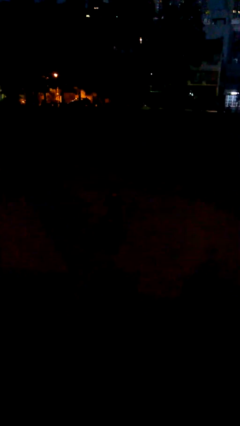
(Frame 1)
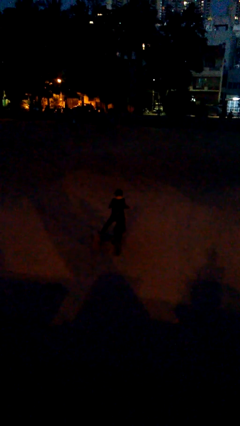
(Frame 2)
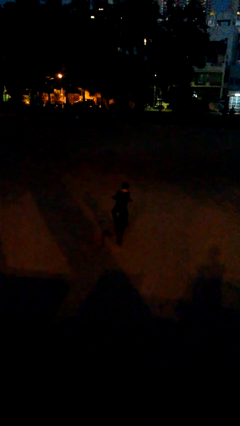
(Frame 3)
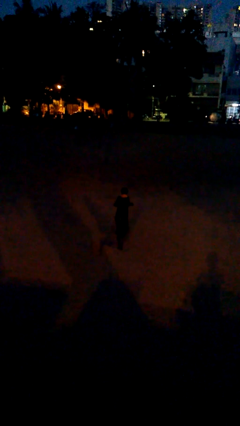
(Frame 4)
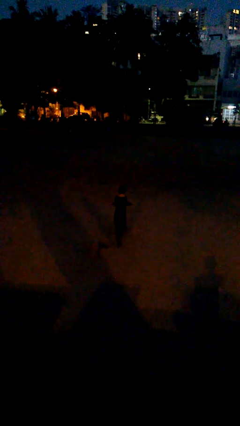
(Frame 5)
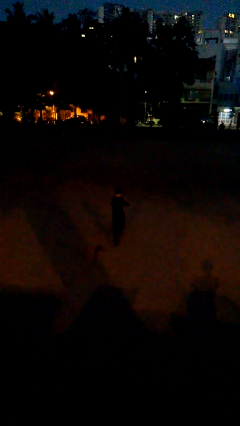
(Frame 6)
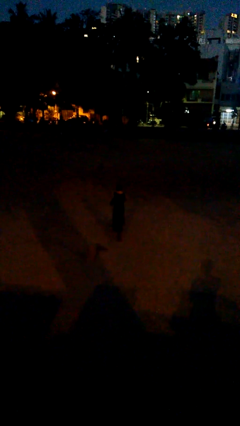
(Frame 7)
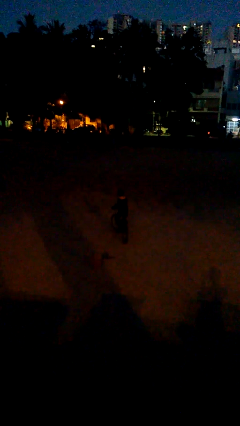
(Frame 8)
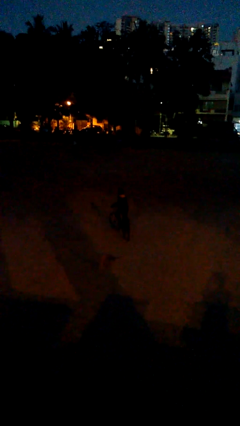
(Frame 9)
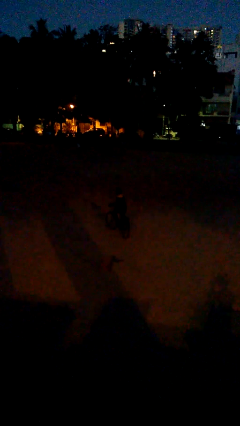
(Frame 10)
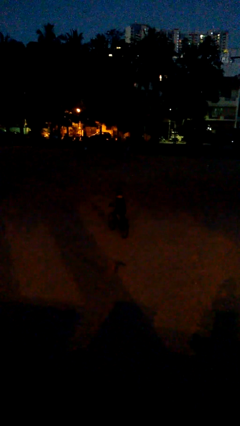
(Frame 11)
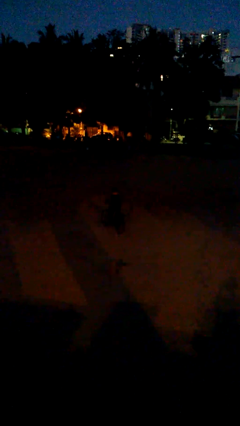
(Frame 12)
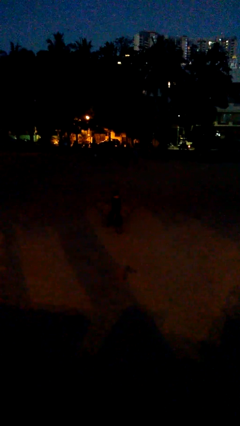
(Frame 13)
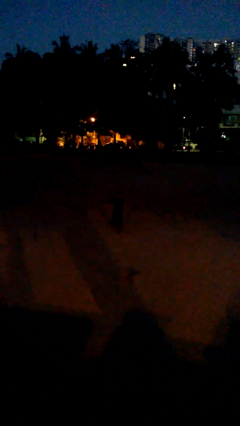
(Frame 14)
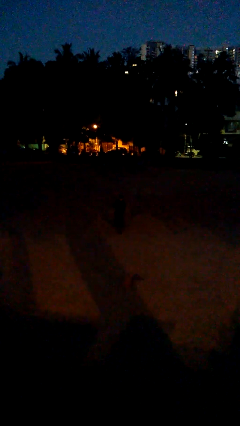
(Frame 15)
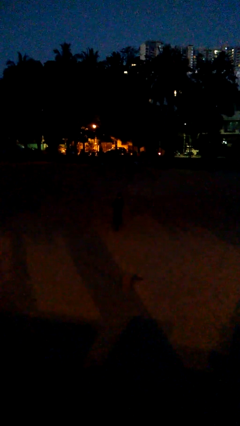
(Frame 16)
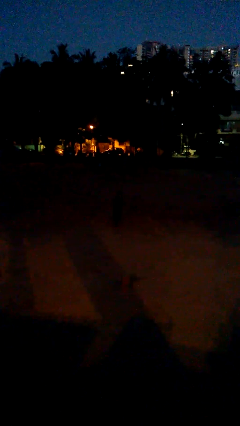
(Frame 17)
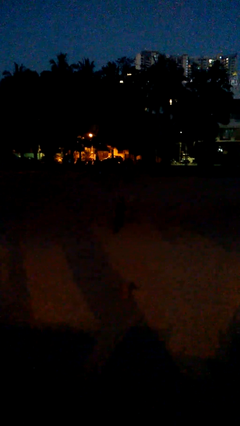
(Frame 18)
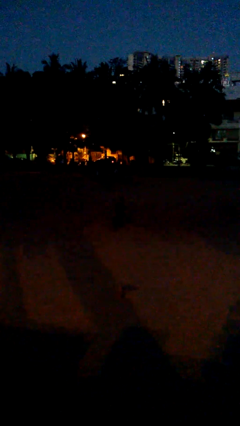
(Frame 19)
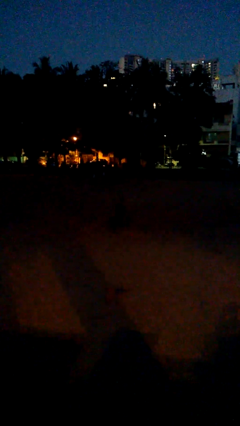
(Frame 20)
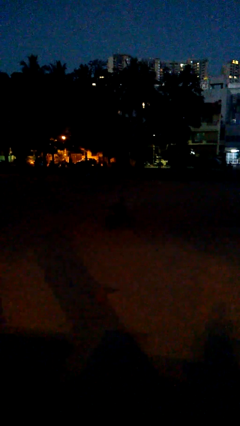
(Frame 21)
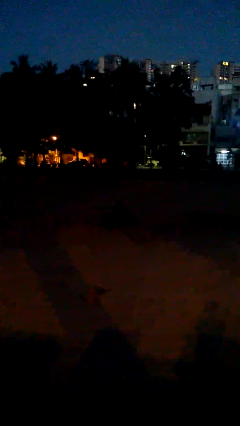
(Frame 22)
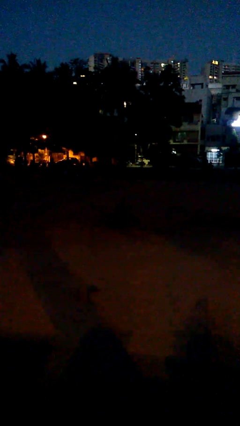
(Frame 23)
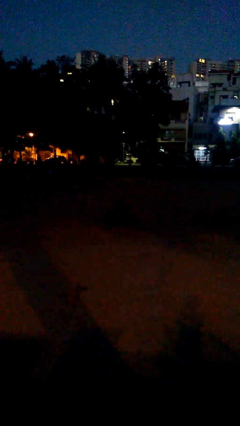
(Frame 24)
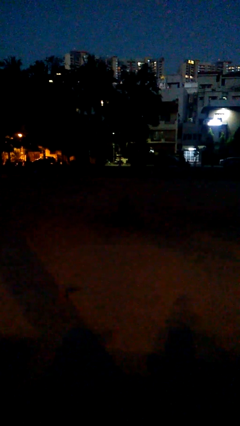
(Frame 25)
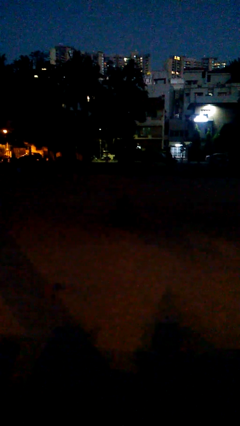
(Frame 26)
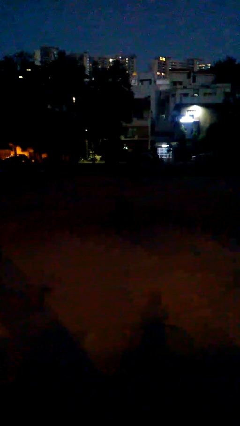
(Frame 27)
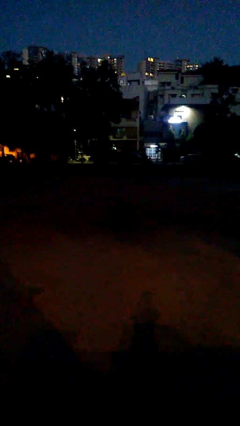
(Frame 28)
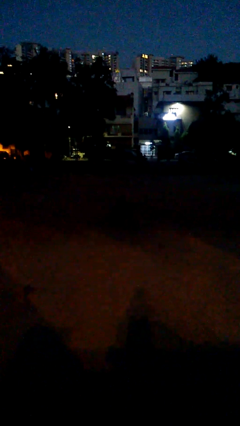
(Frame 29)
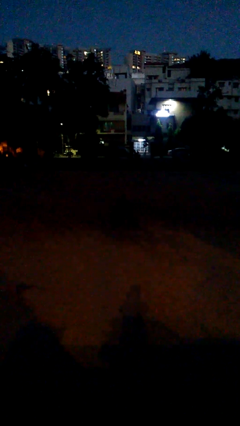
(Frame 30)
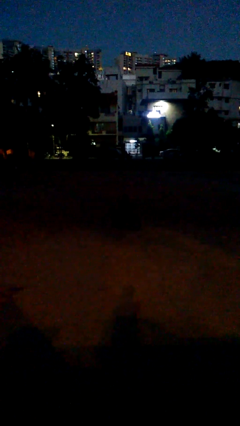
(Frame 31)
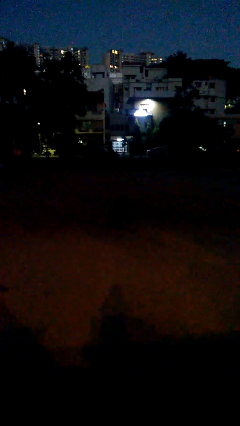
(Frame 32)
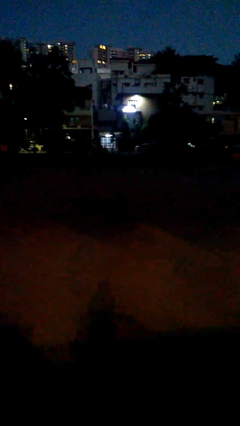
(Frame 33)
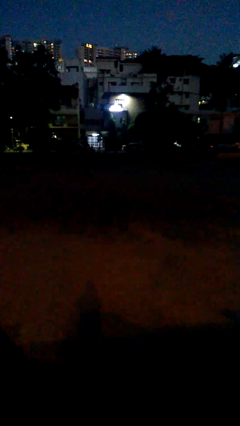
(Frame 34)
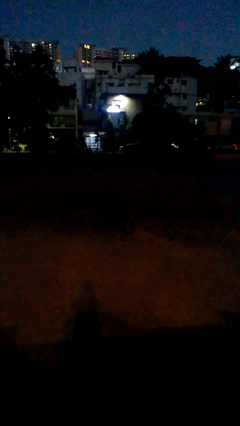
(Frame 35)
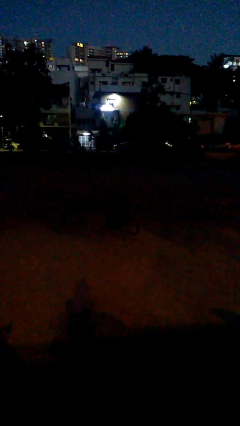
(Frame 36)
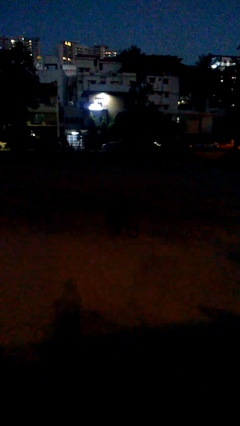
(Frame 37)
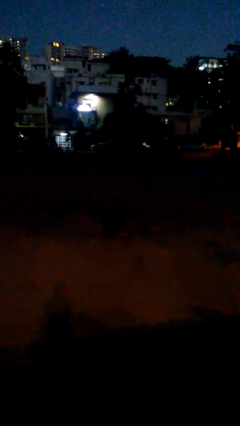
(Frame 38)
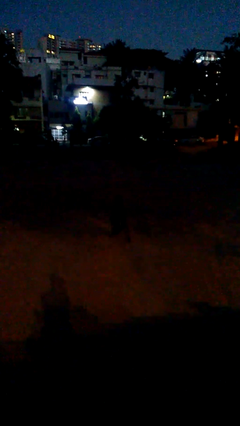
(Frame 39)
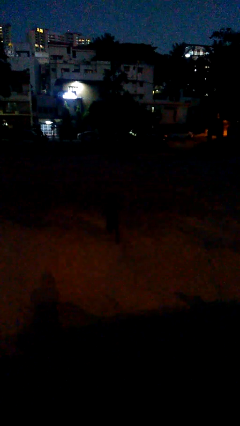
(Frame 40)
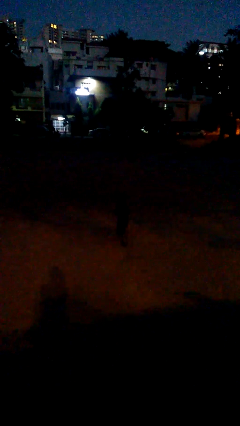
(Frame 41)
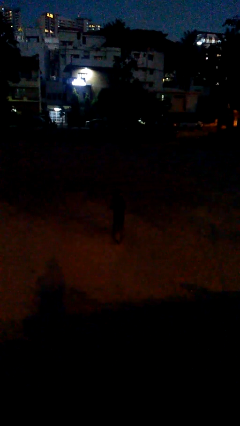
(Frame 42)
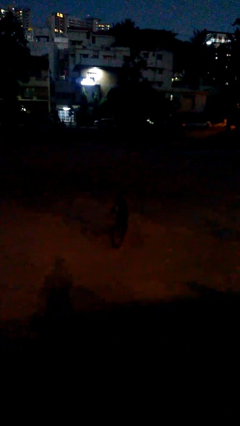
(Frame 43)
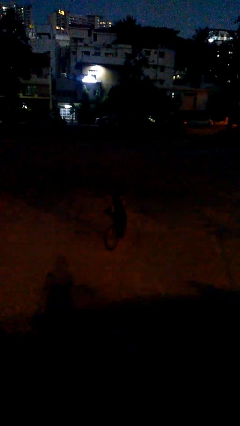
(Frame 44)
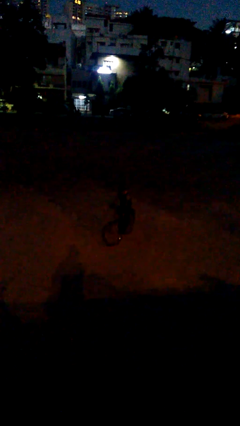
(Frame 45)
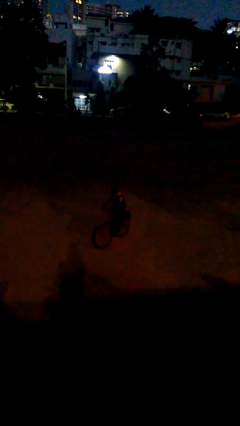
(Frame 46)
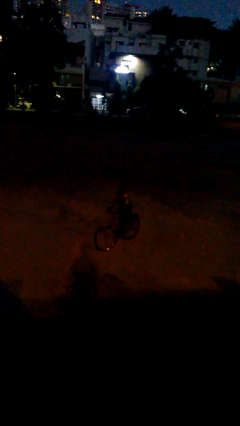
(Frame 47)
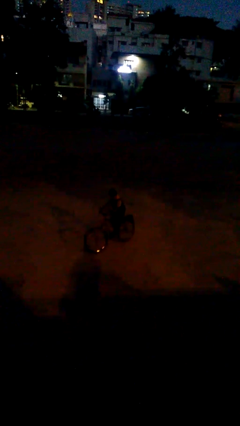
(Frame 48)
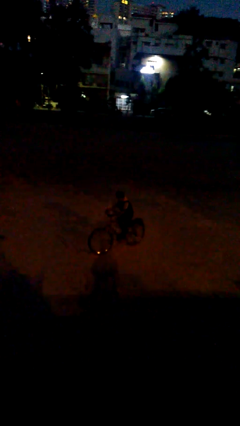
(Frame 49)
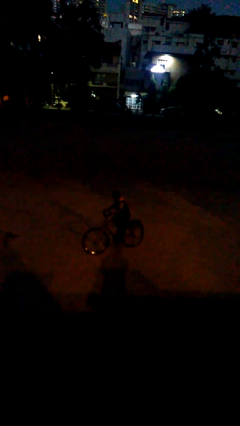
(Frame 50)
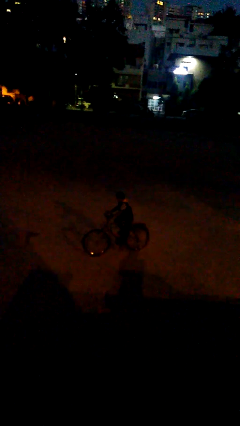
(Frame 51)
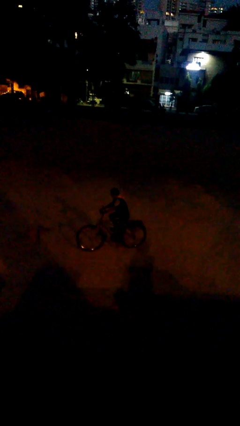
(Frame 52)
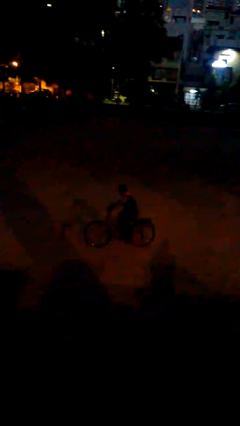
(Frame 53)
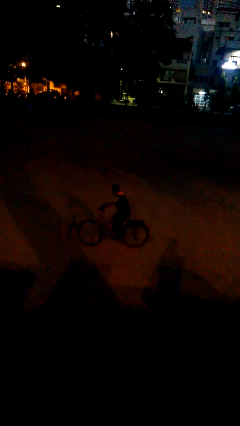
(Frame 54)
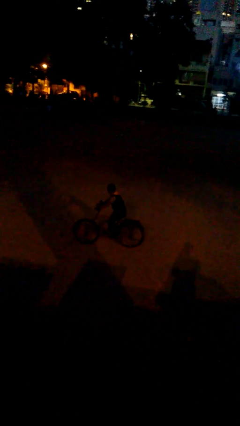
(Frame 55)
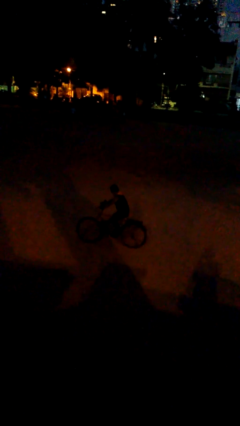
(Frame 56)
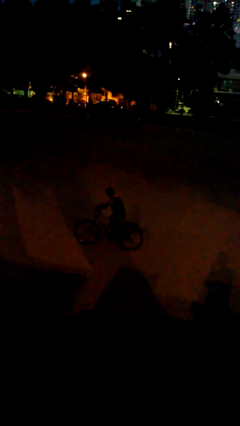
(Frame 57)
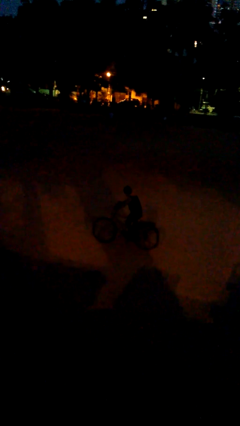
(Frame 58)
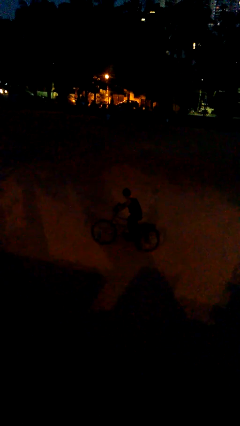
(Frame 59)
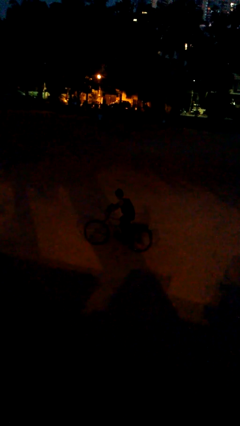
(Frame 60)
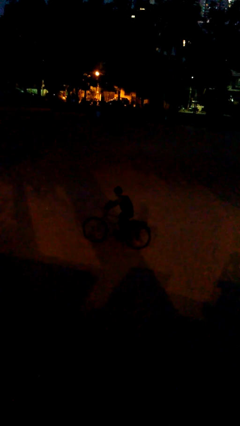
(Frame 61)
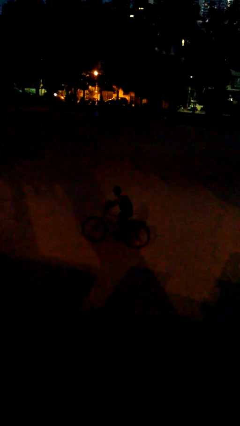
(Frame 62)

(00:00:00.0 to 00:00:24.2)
person rides bicycle

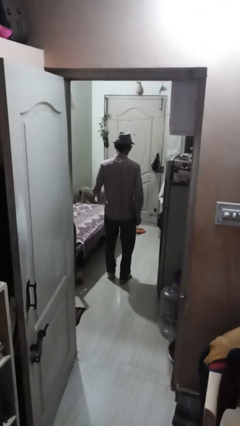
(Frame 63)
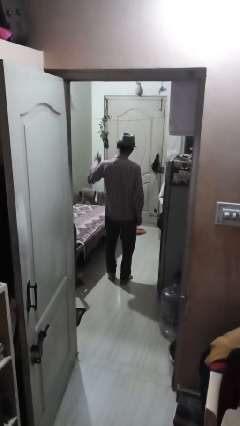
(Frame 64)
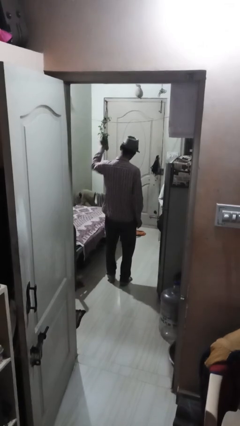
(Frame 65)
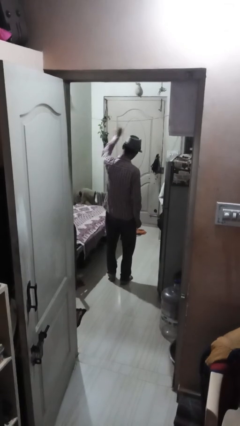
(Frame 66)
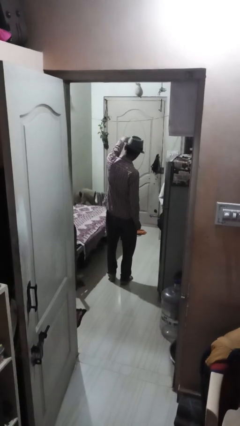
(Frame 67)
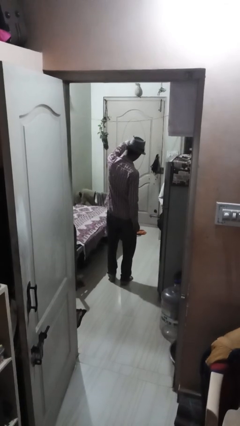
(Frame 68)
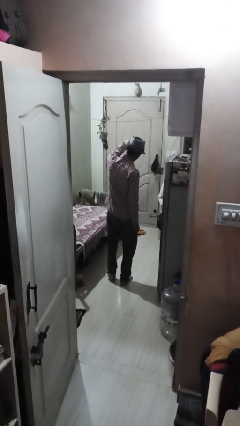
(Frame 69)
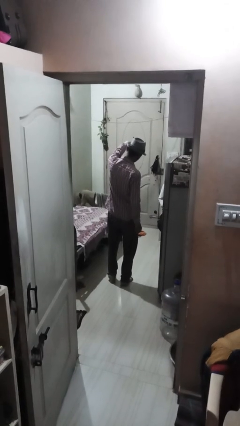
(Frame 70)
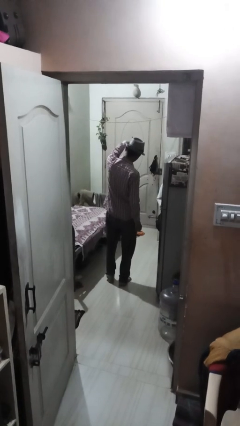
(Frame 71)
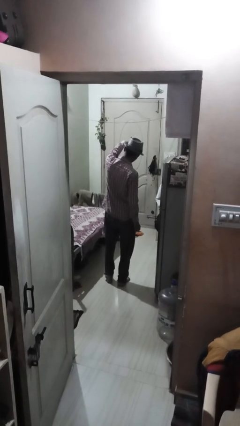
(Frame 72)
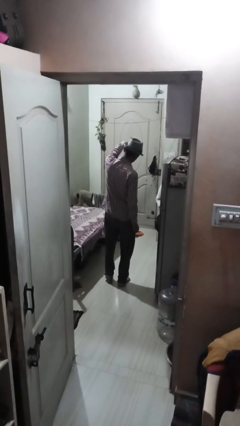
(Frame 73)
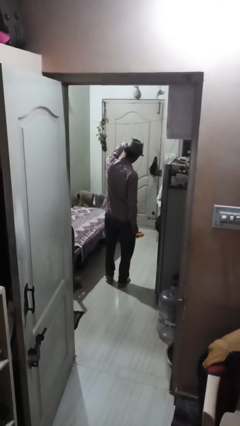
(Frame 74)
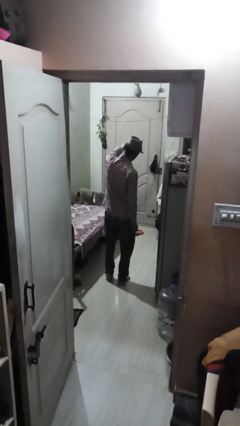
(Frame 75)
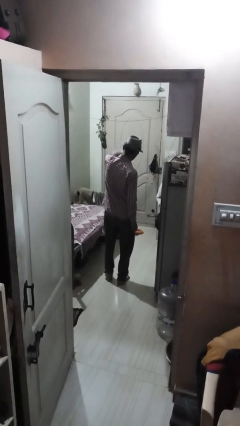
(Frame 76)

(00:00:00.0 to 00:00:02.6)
person points at person

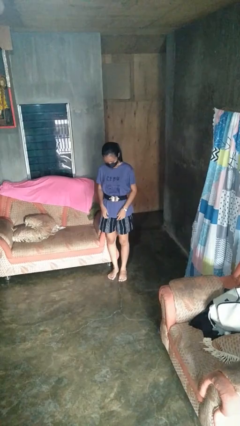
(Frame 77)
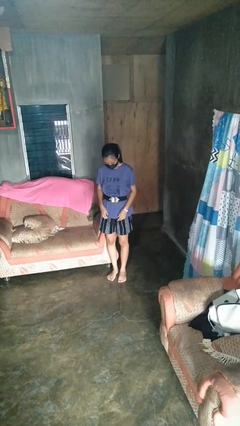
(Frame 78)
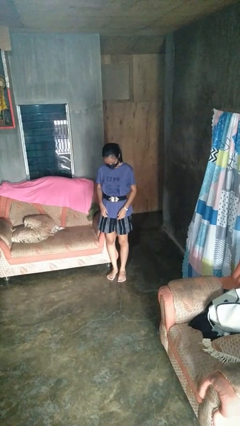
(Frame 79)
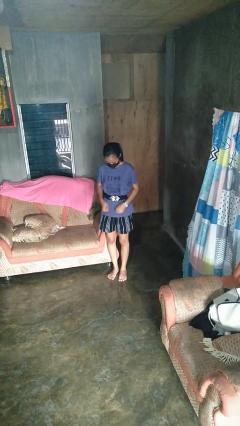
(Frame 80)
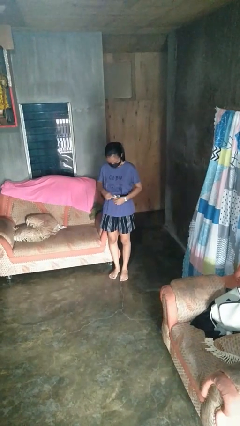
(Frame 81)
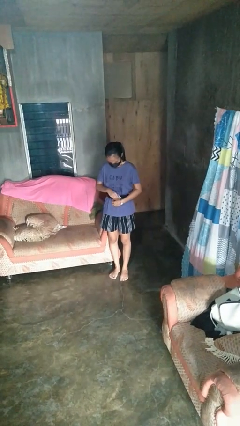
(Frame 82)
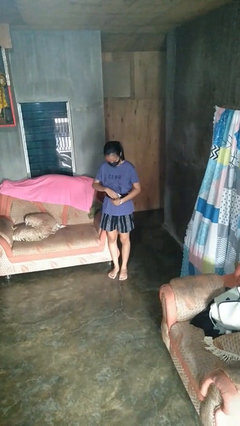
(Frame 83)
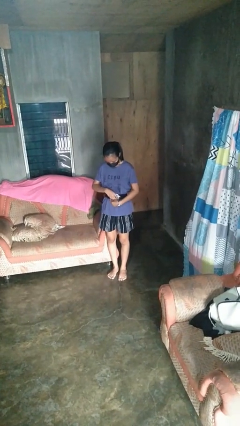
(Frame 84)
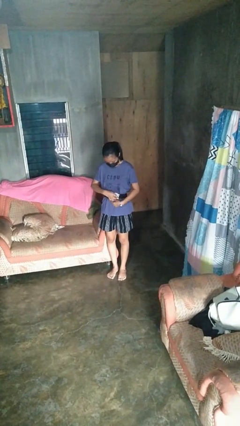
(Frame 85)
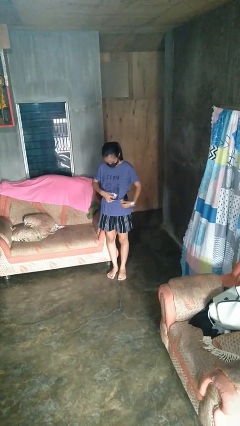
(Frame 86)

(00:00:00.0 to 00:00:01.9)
person takes off belt

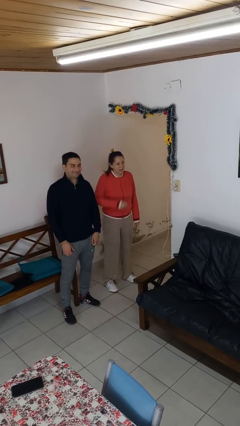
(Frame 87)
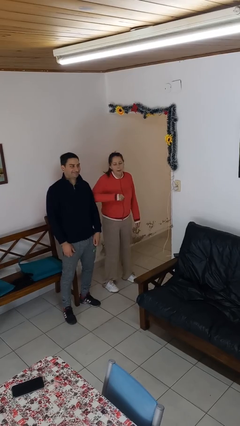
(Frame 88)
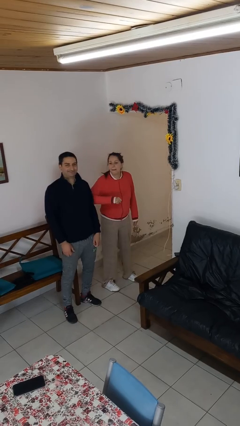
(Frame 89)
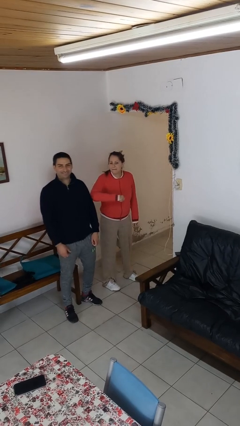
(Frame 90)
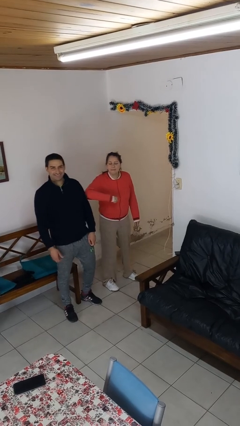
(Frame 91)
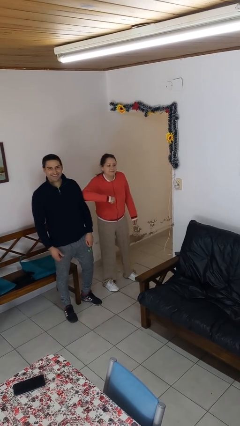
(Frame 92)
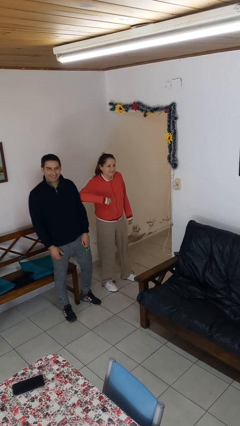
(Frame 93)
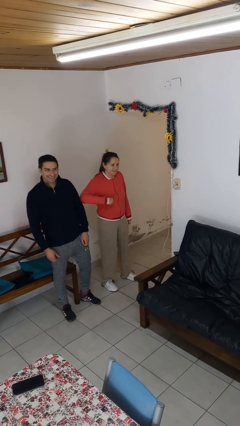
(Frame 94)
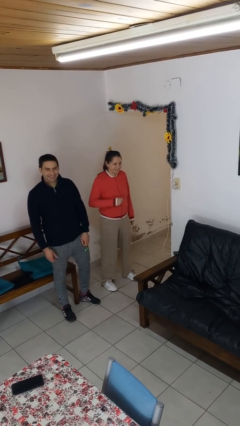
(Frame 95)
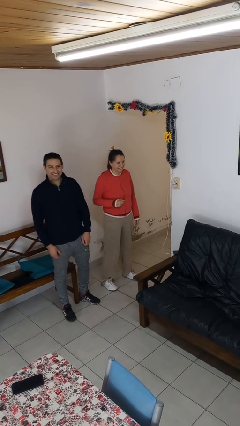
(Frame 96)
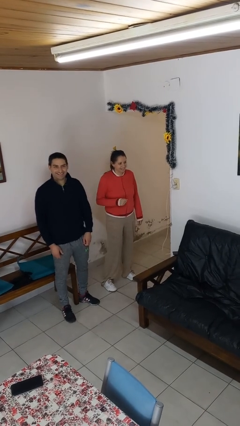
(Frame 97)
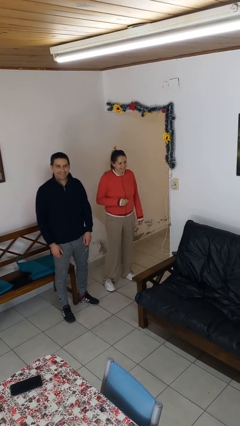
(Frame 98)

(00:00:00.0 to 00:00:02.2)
person nudges person with elbow
